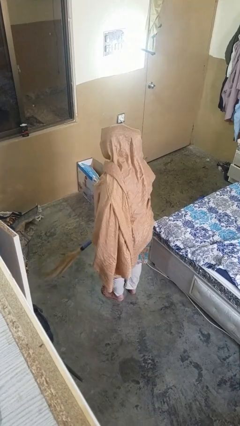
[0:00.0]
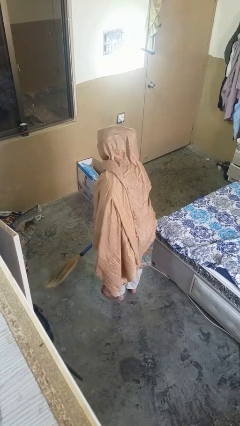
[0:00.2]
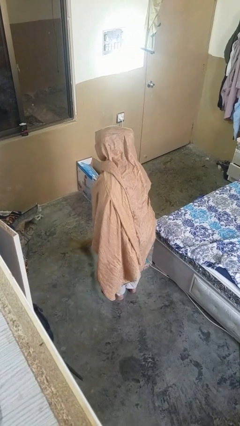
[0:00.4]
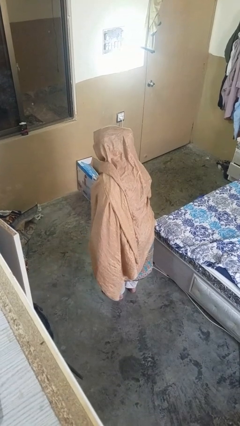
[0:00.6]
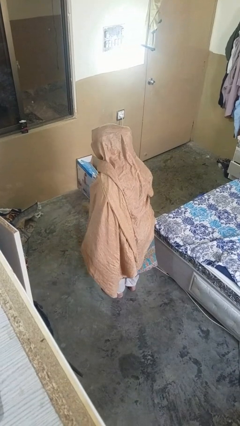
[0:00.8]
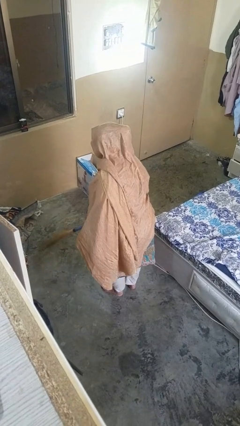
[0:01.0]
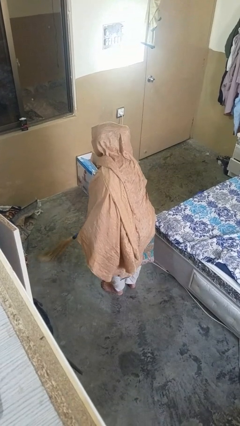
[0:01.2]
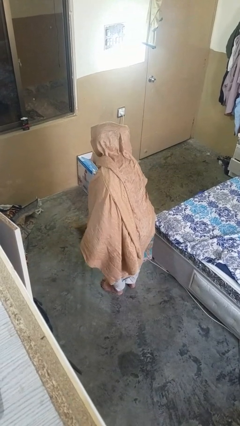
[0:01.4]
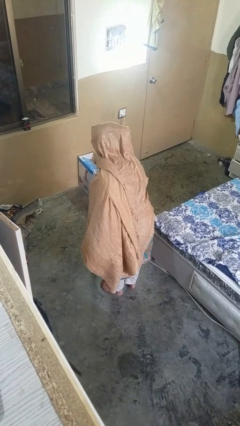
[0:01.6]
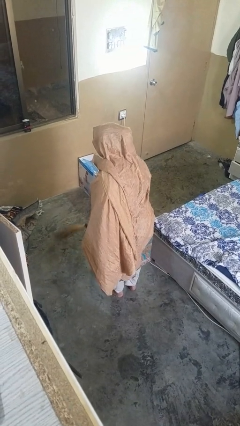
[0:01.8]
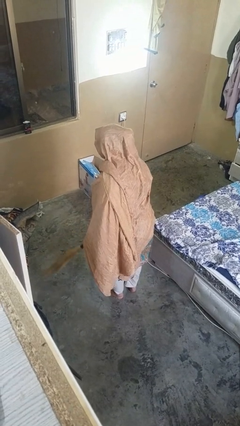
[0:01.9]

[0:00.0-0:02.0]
person sweeps floor

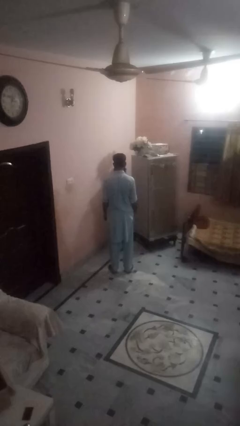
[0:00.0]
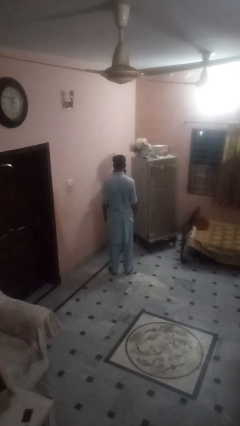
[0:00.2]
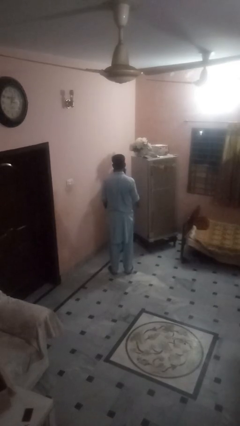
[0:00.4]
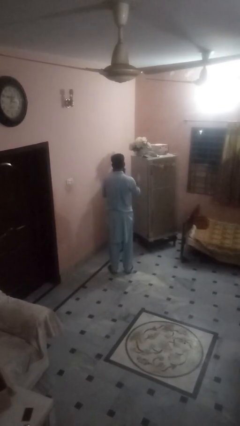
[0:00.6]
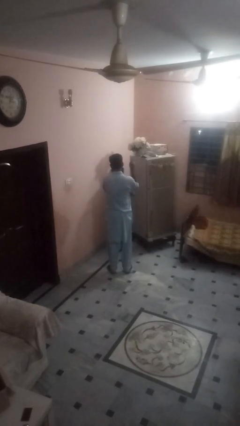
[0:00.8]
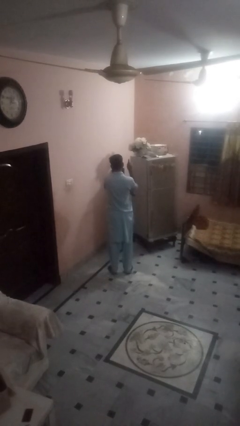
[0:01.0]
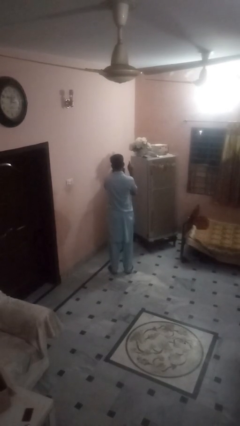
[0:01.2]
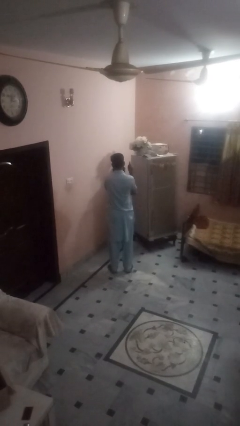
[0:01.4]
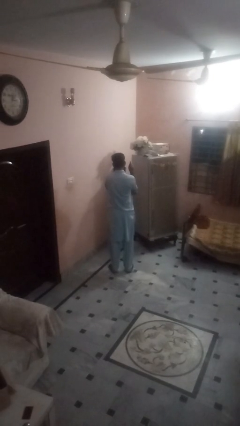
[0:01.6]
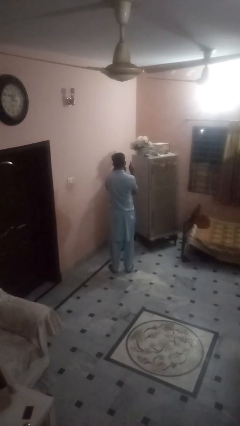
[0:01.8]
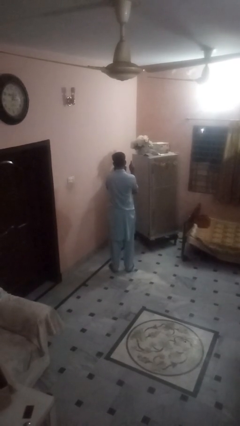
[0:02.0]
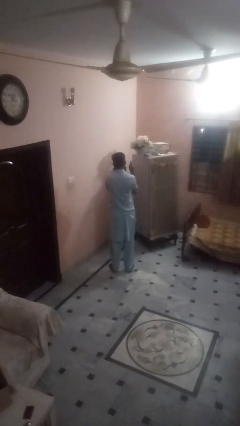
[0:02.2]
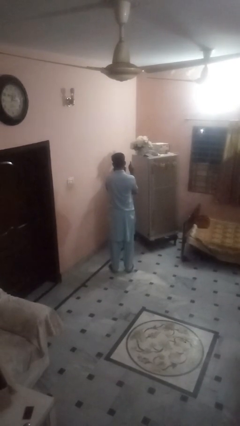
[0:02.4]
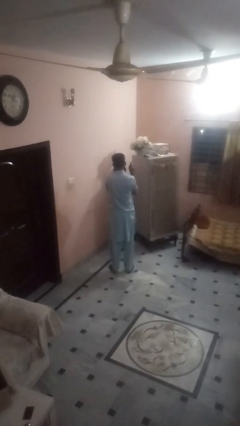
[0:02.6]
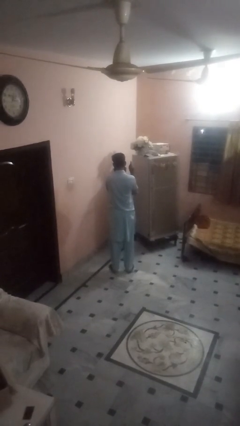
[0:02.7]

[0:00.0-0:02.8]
person gestures number one

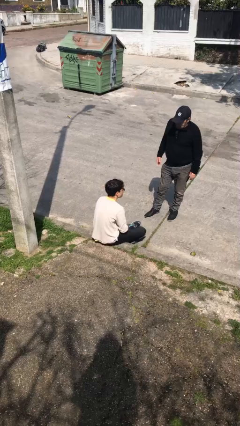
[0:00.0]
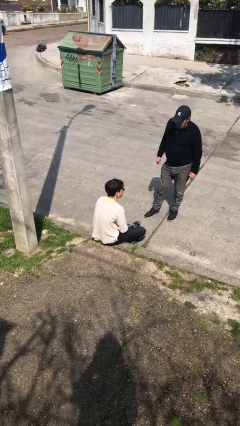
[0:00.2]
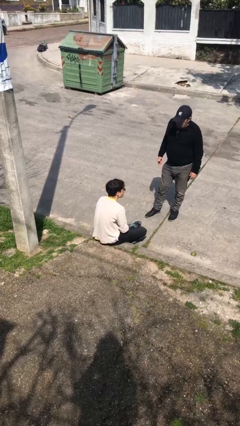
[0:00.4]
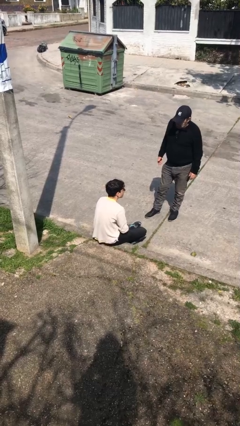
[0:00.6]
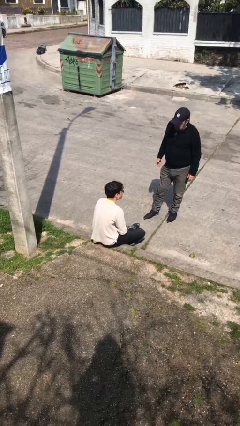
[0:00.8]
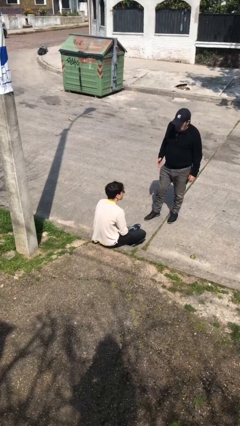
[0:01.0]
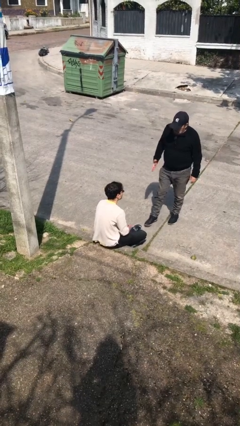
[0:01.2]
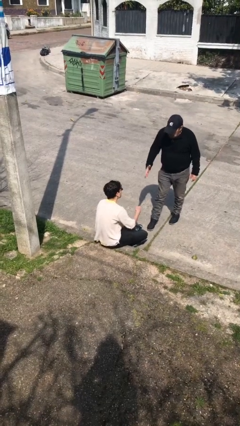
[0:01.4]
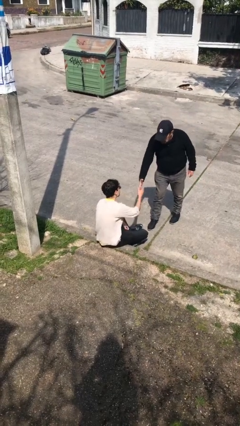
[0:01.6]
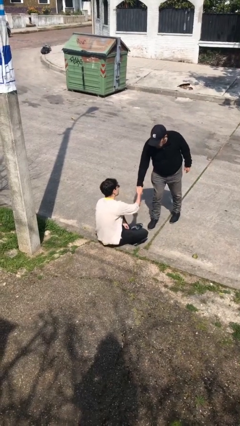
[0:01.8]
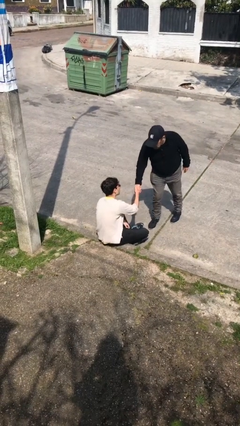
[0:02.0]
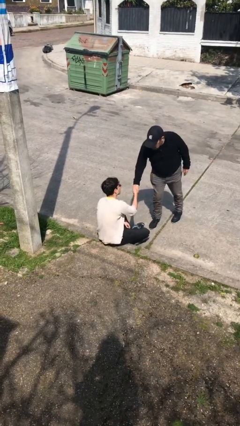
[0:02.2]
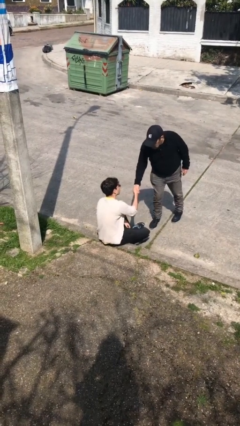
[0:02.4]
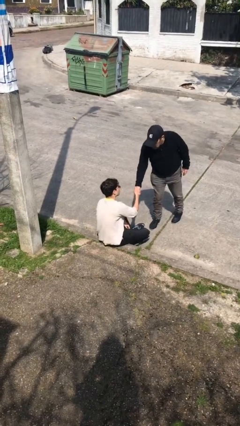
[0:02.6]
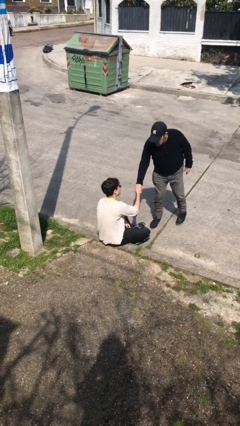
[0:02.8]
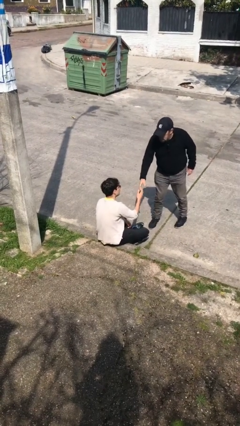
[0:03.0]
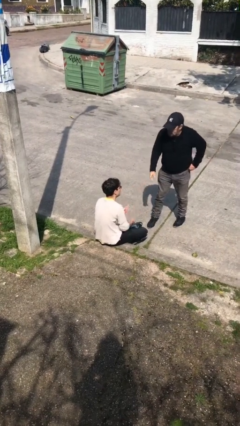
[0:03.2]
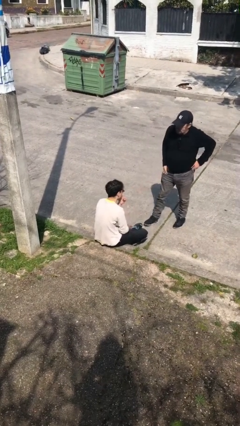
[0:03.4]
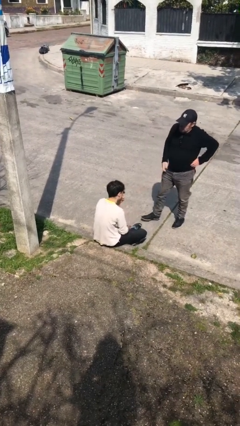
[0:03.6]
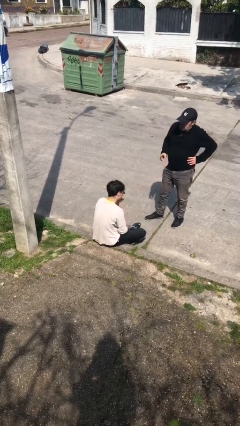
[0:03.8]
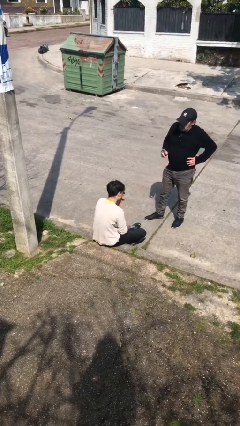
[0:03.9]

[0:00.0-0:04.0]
person shakes hand

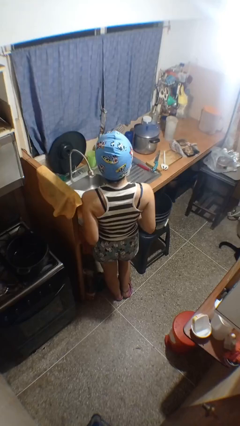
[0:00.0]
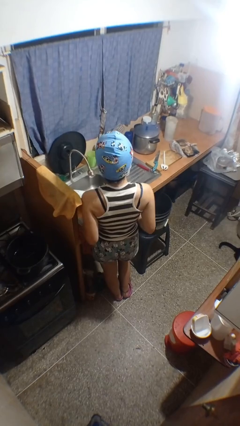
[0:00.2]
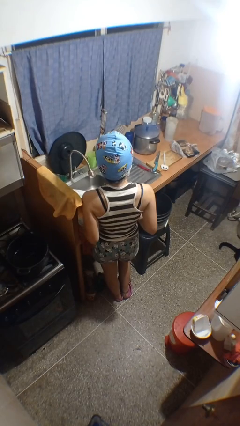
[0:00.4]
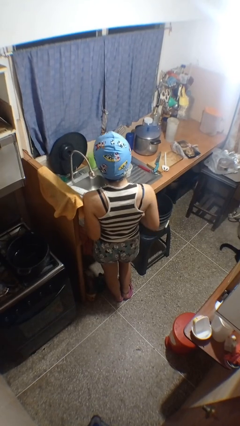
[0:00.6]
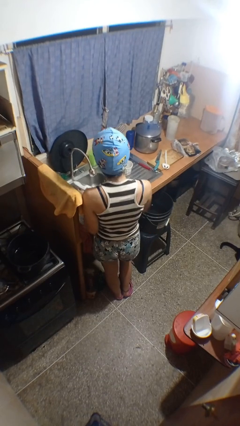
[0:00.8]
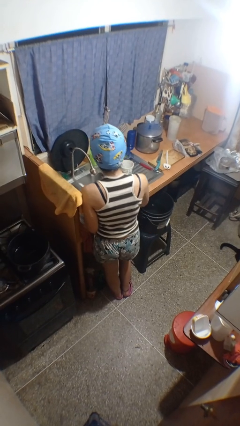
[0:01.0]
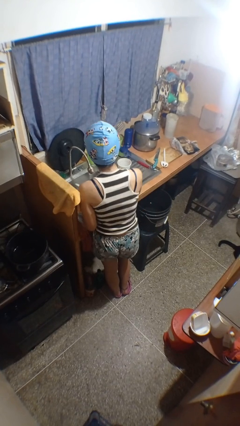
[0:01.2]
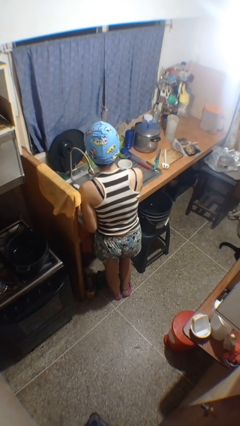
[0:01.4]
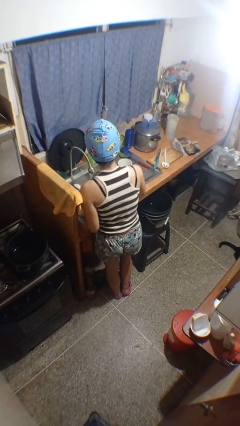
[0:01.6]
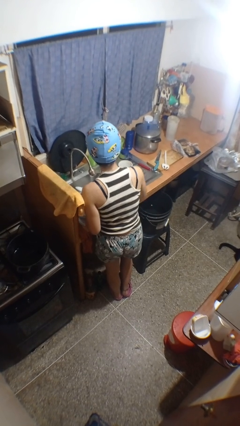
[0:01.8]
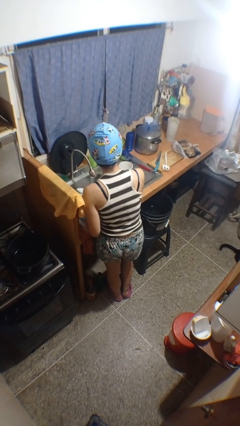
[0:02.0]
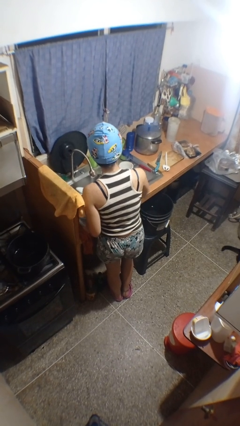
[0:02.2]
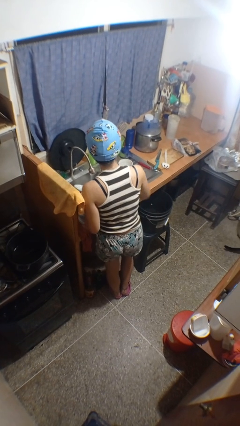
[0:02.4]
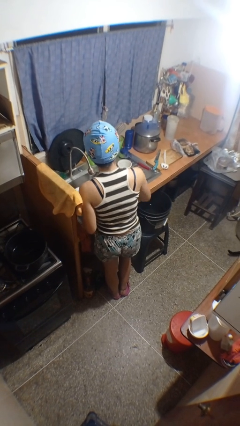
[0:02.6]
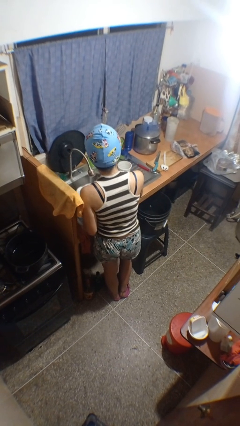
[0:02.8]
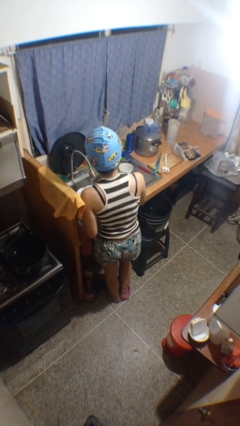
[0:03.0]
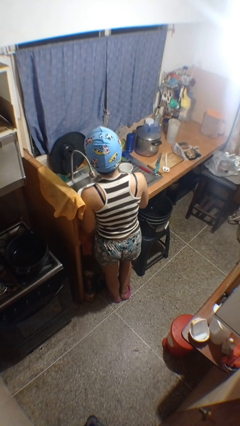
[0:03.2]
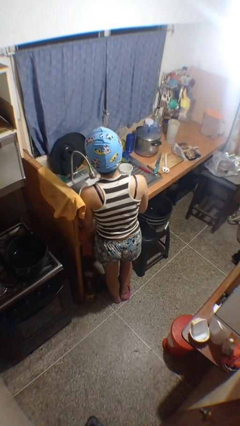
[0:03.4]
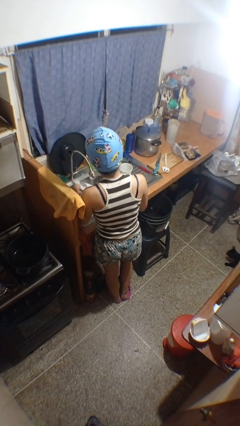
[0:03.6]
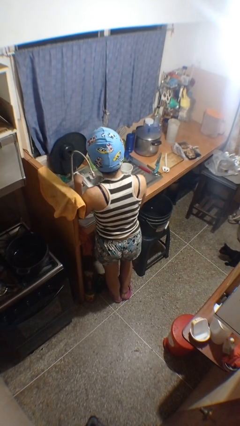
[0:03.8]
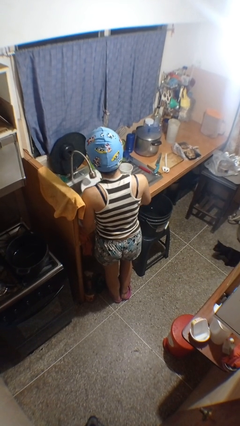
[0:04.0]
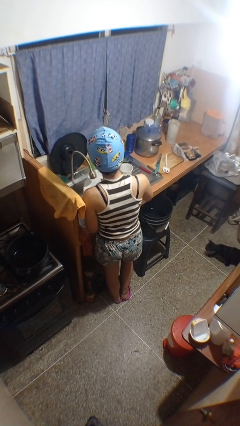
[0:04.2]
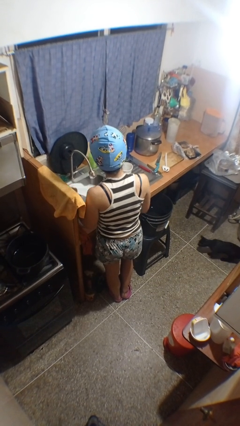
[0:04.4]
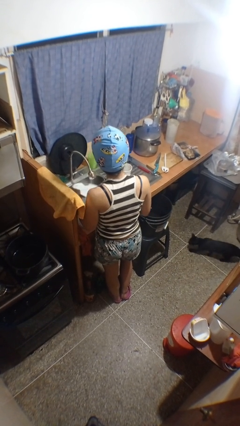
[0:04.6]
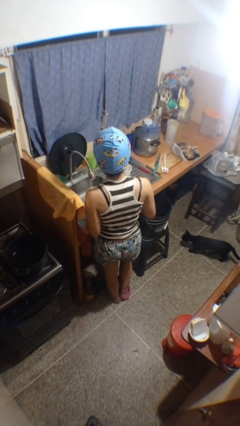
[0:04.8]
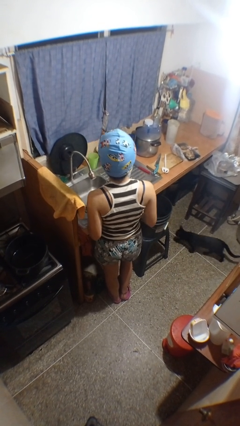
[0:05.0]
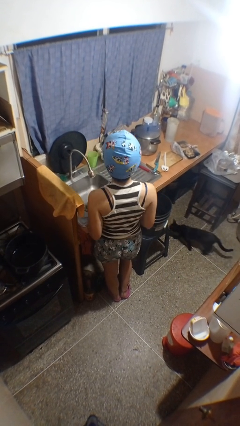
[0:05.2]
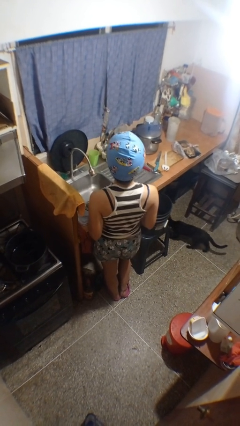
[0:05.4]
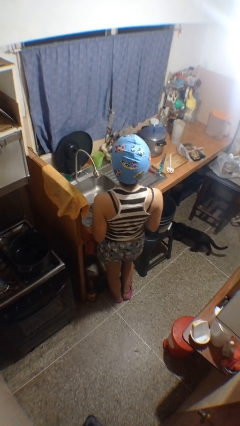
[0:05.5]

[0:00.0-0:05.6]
person washes dish

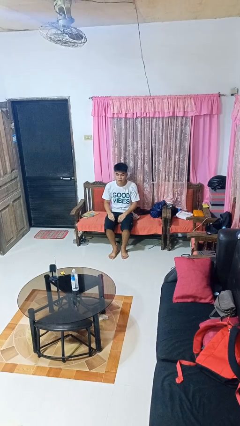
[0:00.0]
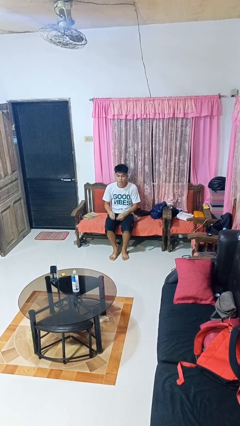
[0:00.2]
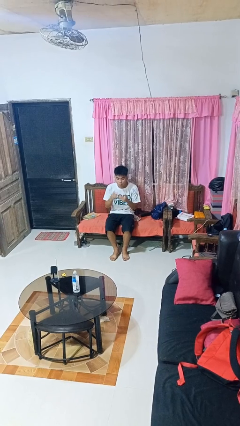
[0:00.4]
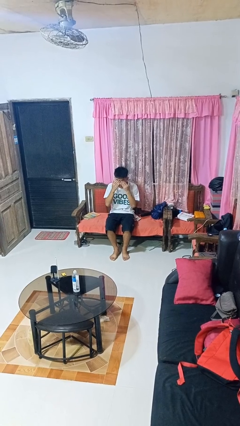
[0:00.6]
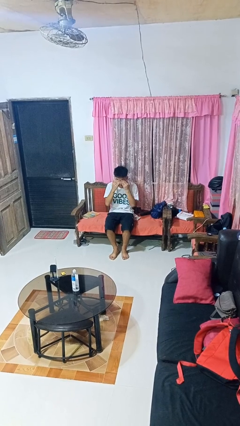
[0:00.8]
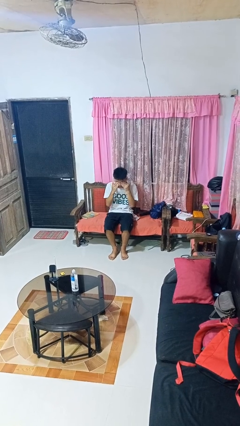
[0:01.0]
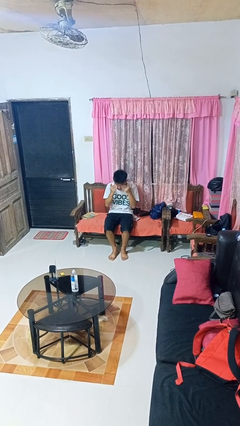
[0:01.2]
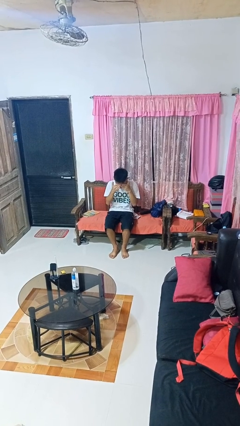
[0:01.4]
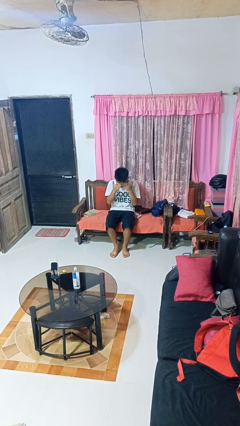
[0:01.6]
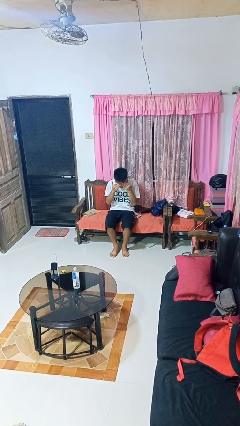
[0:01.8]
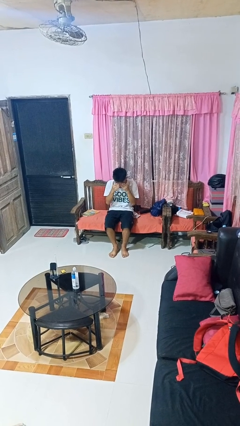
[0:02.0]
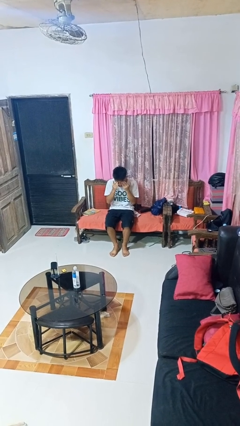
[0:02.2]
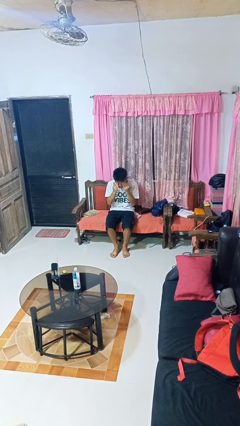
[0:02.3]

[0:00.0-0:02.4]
person rubs eyes

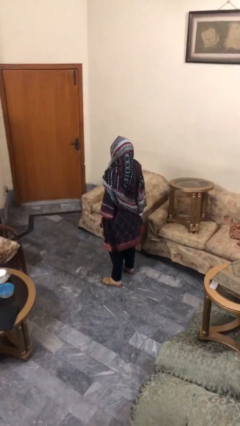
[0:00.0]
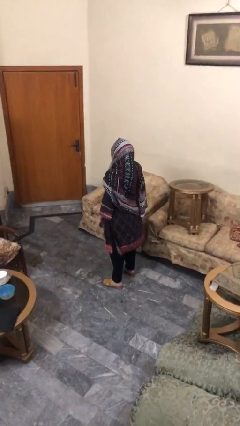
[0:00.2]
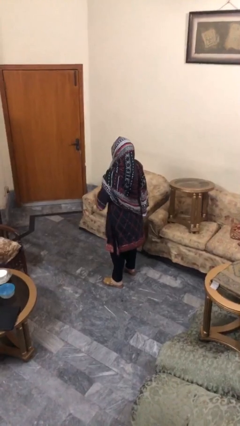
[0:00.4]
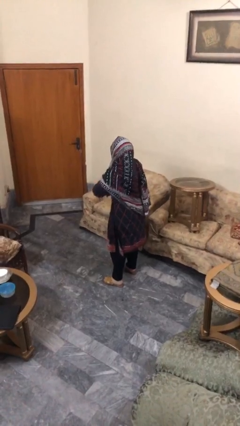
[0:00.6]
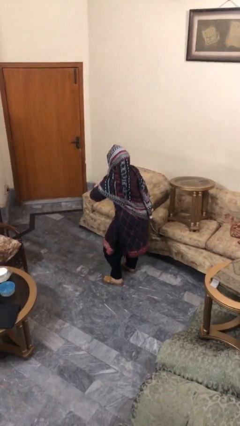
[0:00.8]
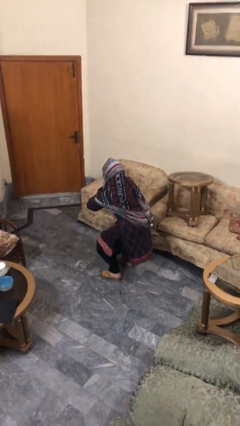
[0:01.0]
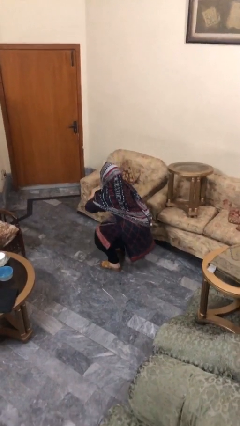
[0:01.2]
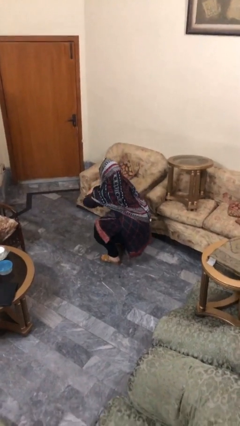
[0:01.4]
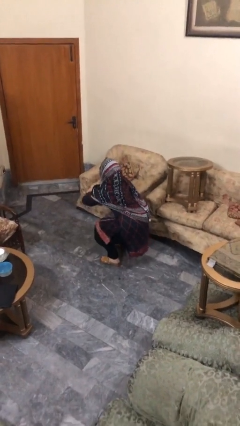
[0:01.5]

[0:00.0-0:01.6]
person squats
